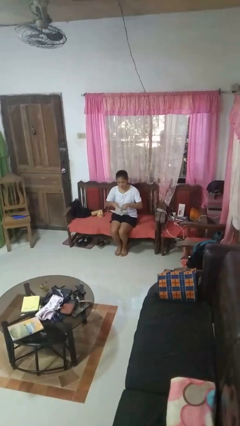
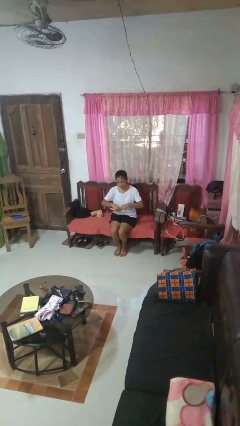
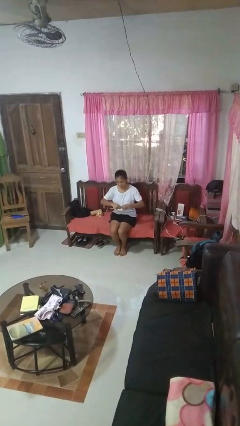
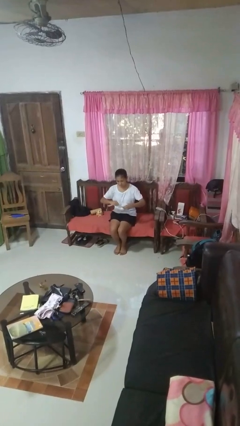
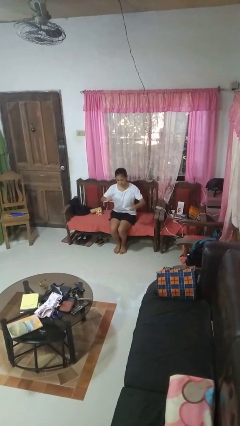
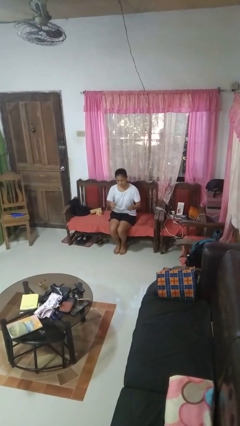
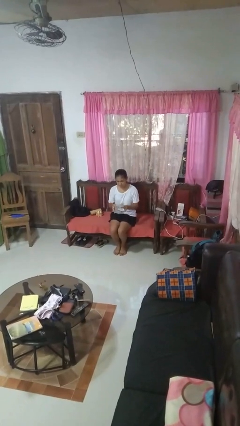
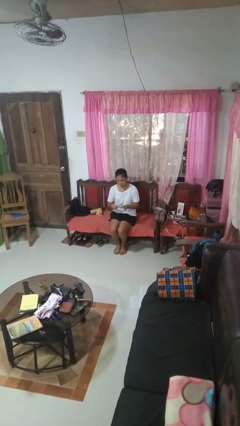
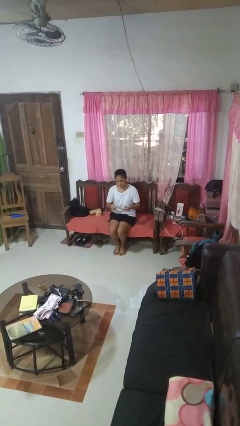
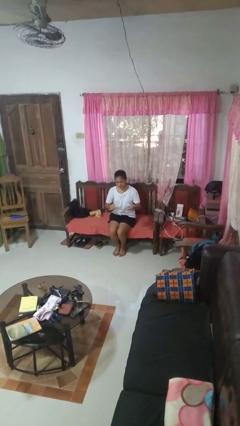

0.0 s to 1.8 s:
person tears paper

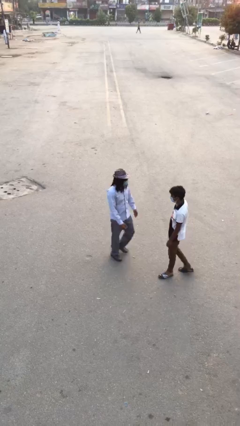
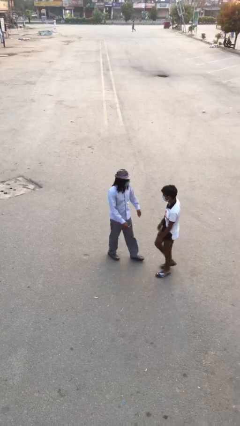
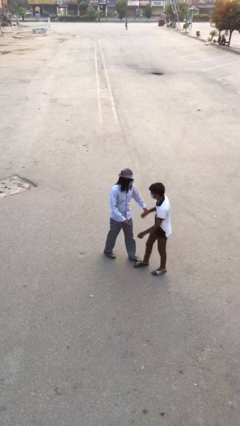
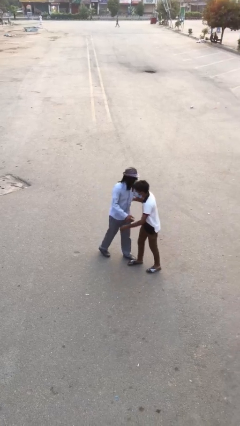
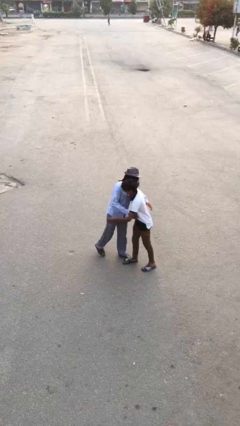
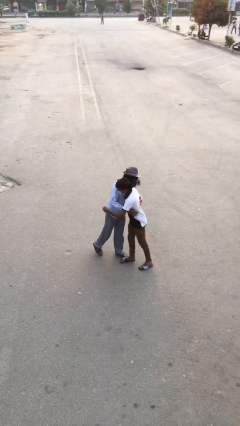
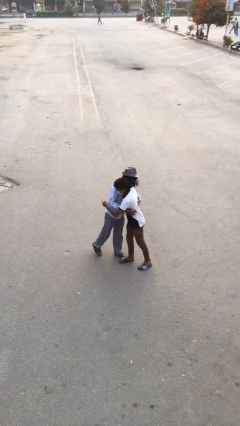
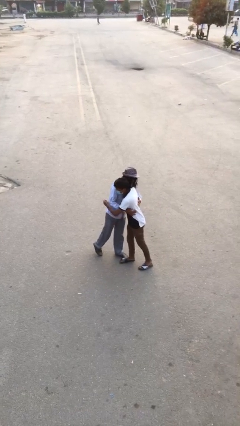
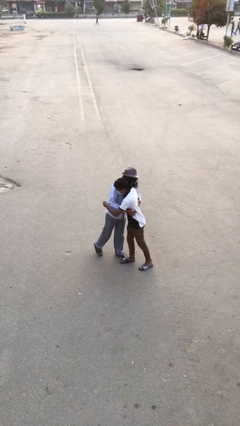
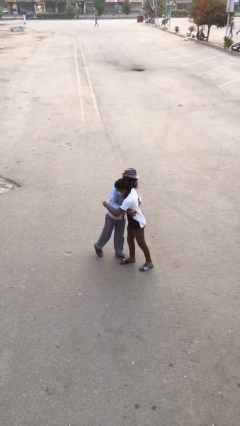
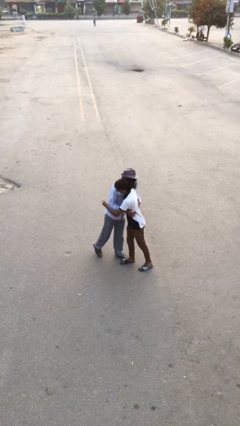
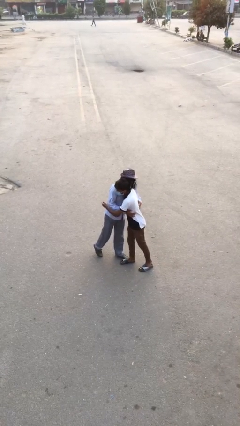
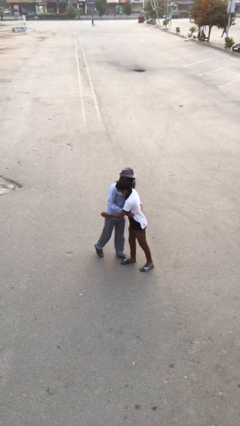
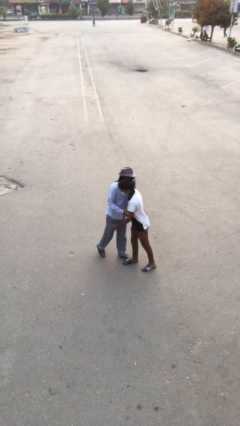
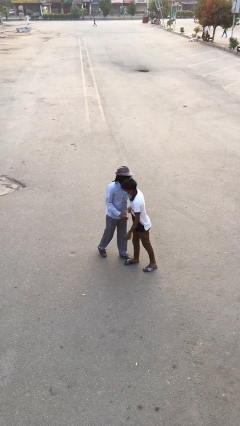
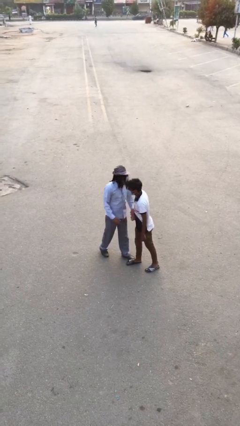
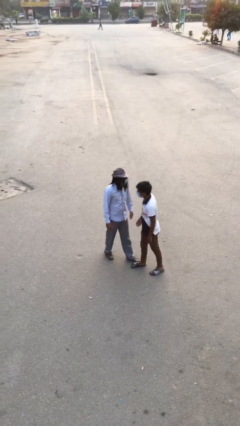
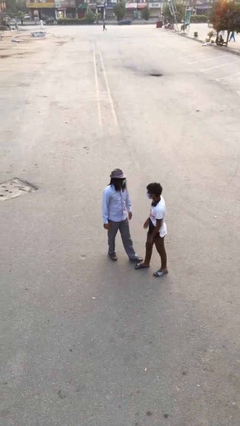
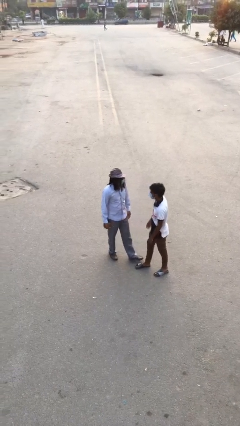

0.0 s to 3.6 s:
person embraces person

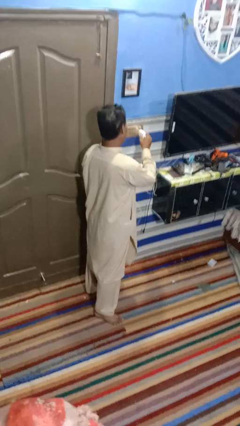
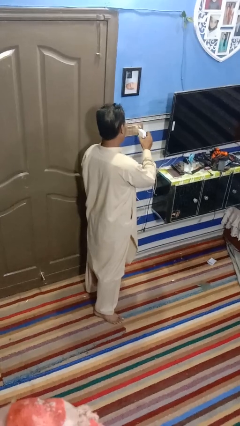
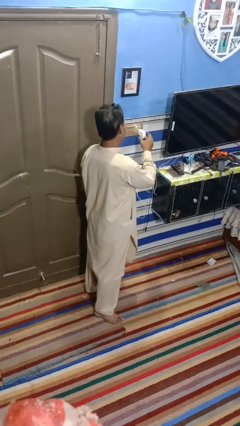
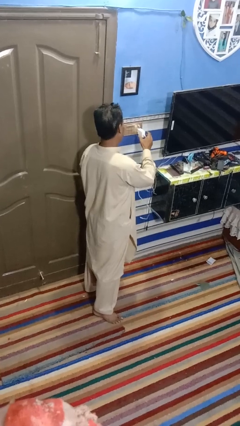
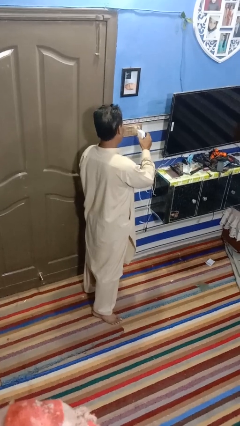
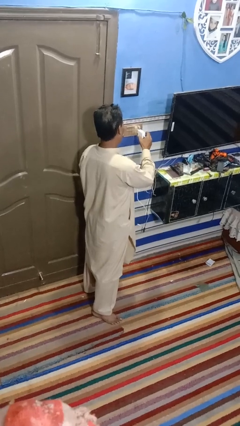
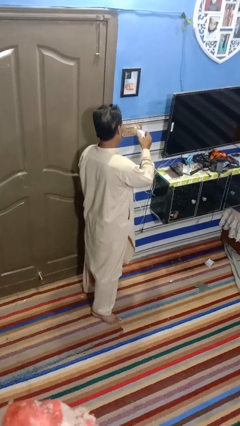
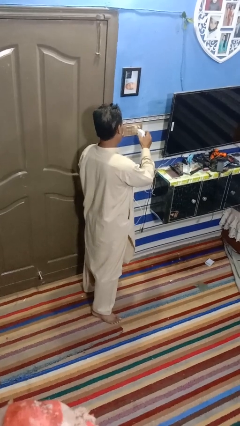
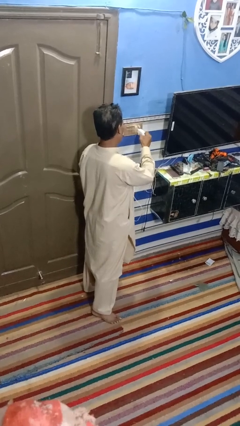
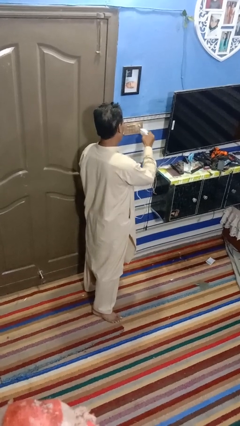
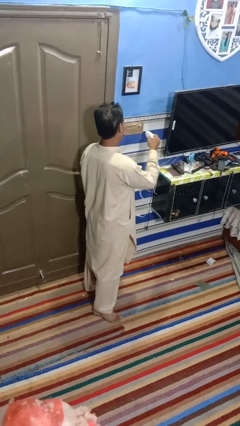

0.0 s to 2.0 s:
person plugs into electrical socket

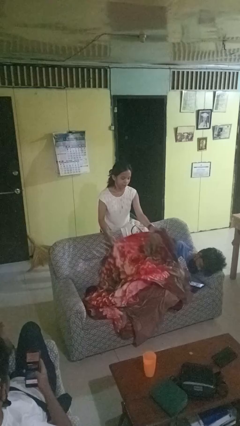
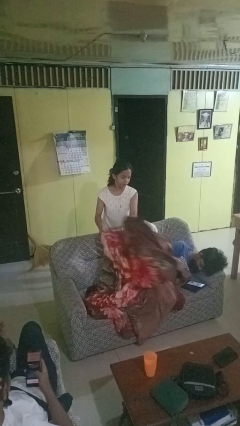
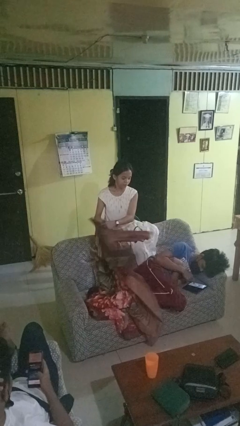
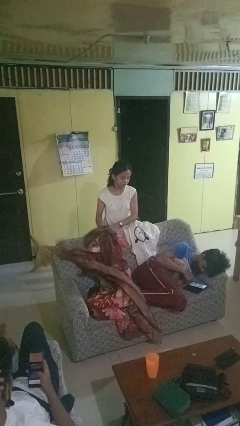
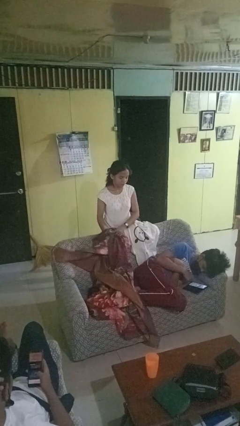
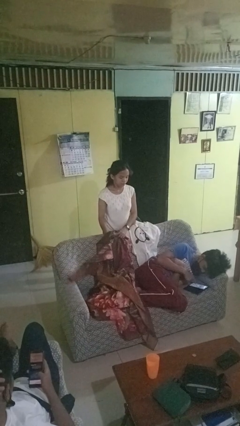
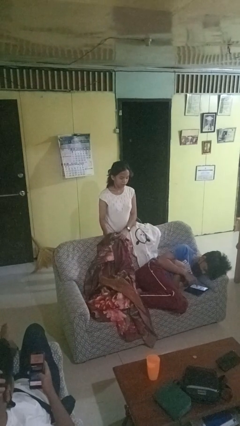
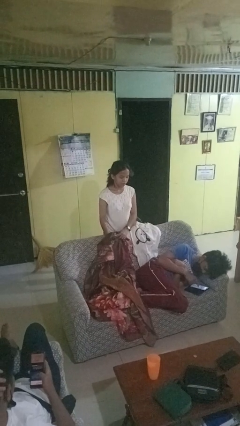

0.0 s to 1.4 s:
person uncovers friend with blanket

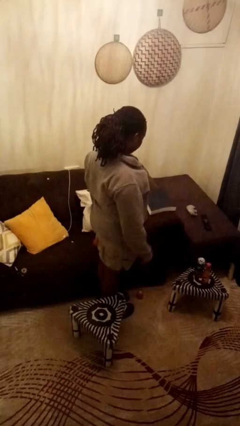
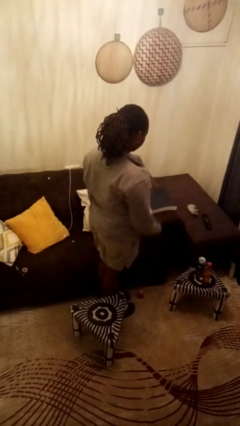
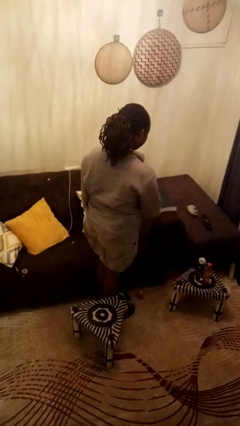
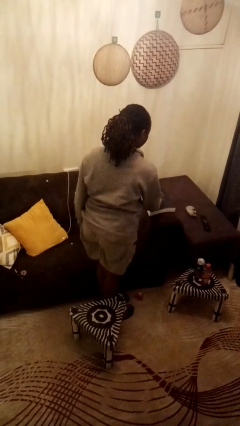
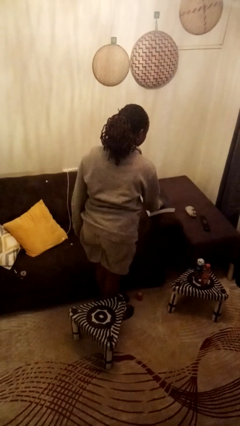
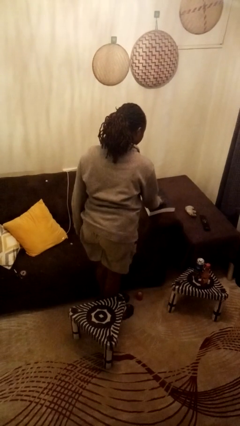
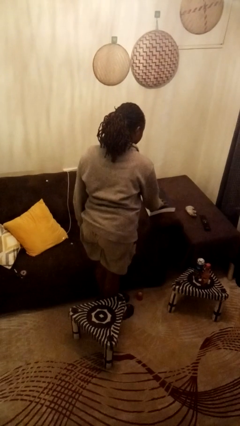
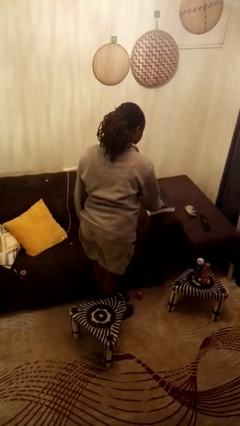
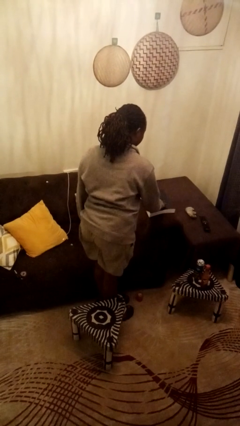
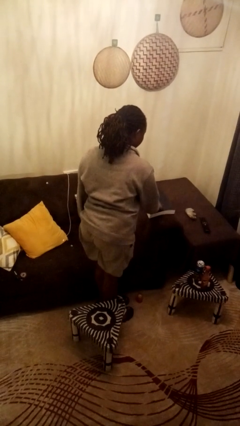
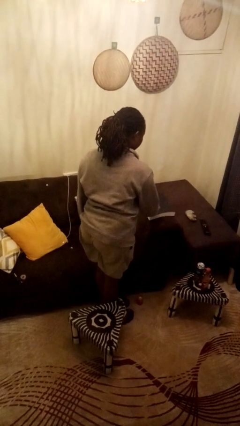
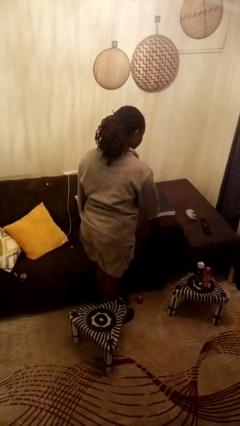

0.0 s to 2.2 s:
person taps object with finger

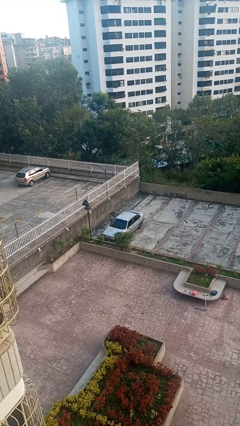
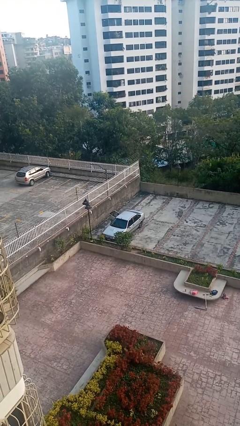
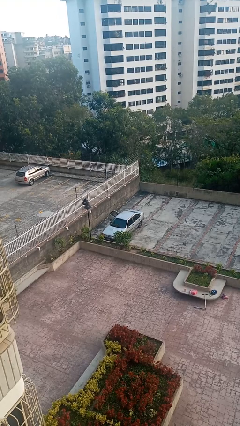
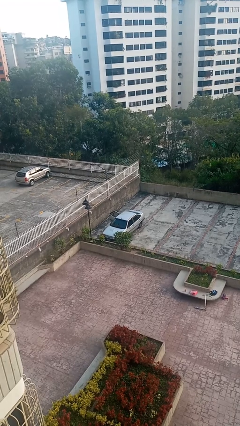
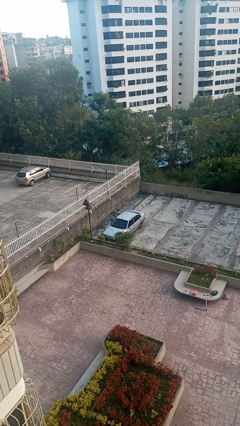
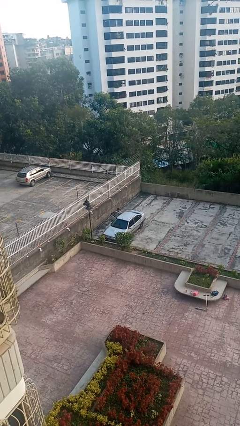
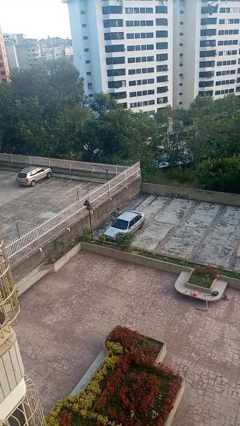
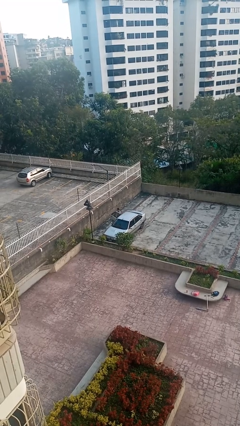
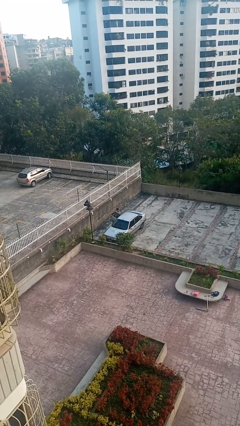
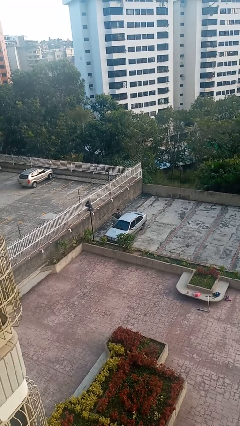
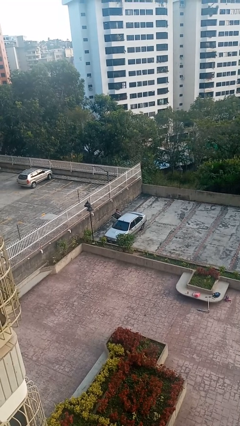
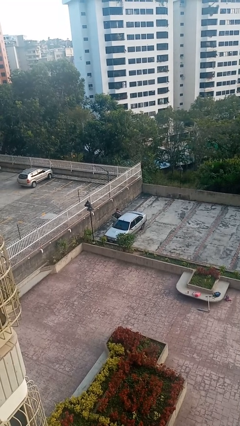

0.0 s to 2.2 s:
person exits car

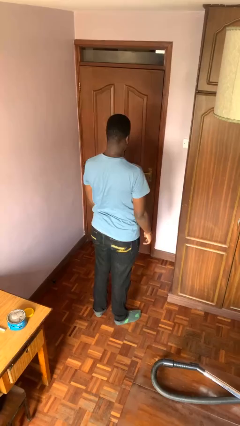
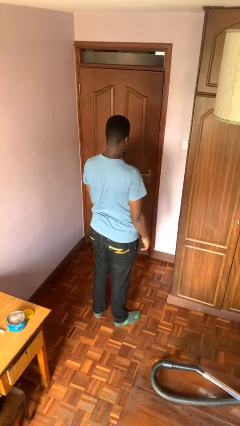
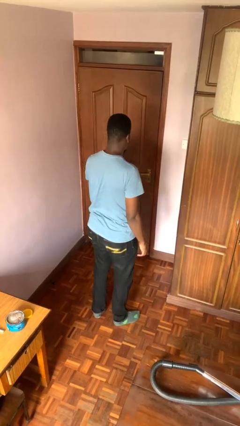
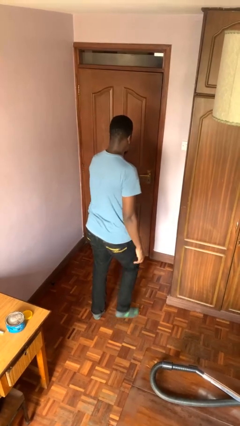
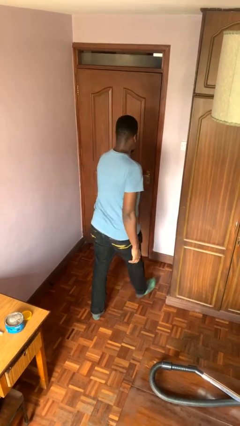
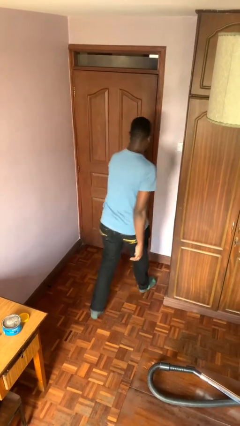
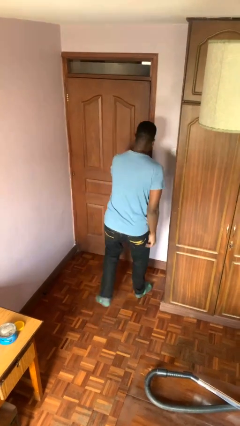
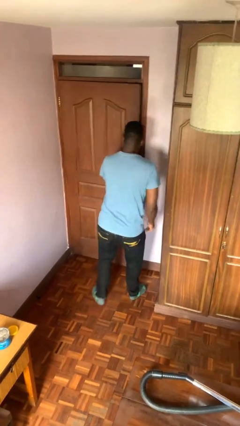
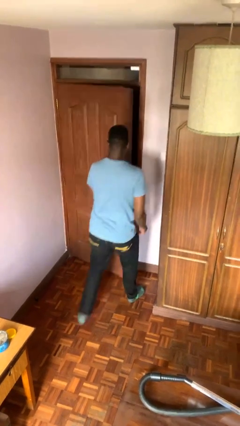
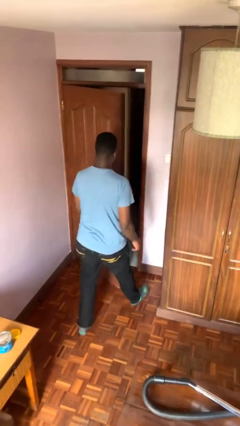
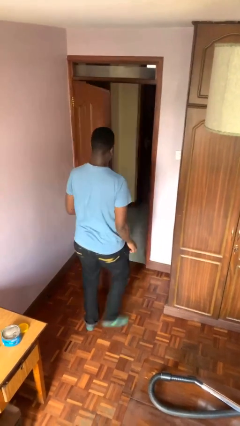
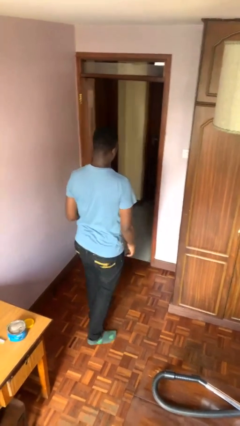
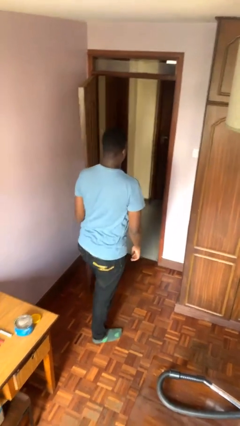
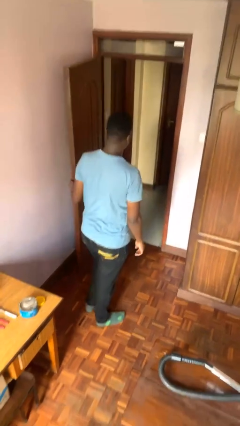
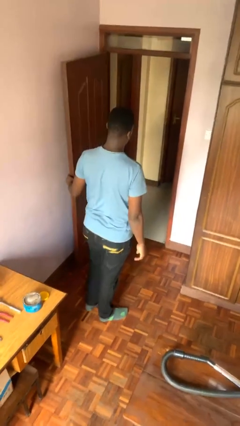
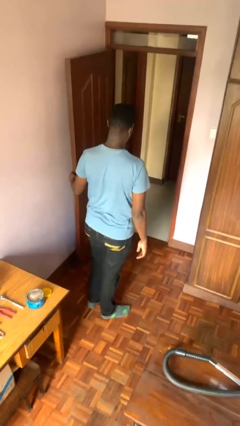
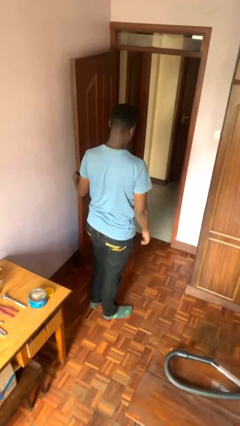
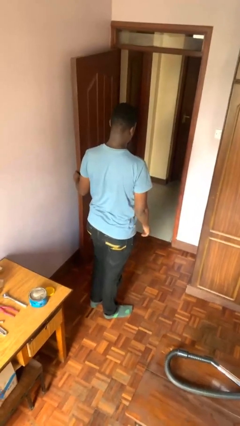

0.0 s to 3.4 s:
person opens facility door

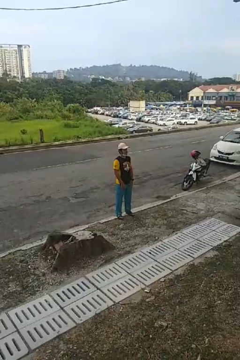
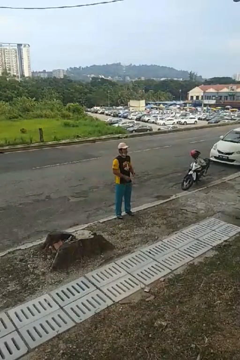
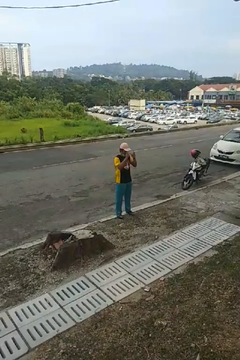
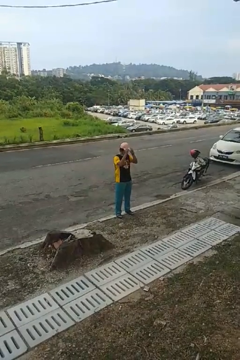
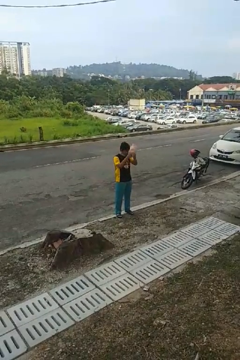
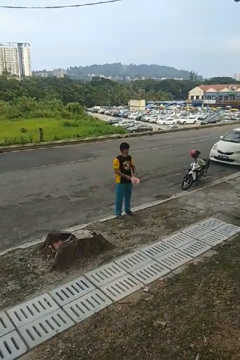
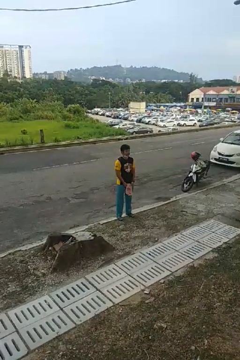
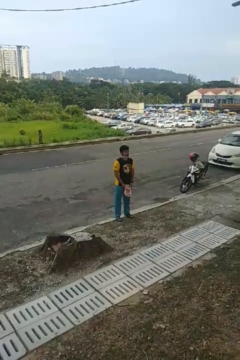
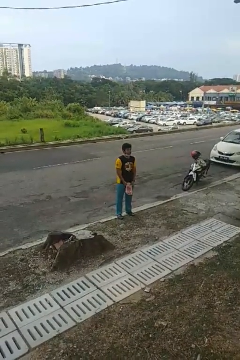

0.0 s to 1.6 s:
person takes off hat
